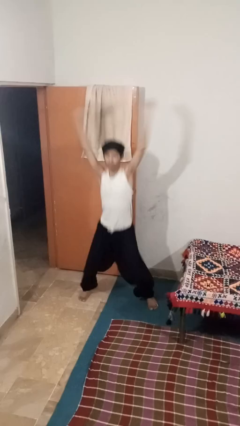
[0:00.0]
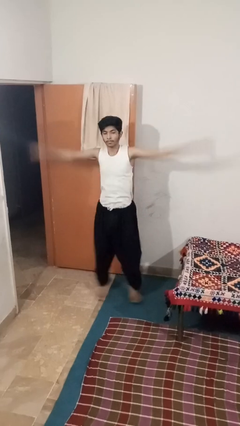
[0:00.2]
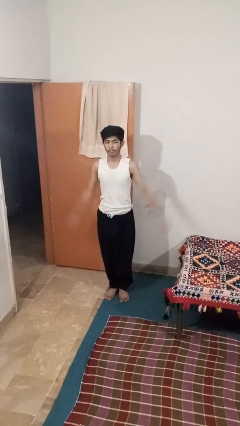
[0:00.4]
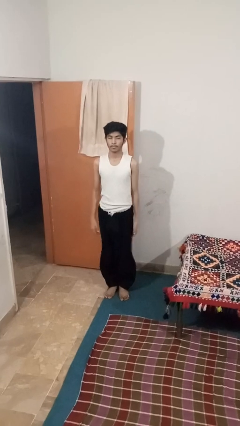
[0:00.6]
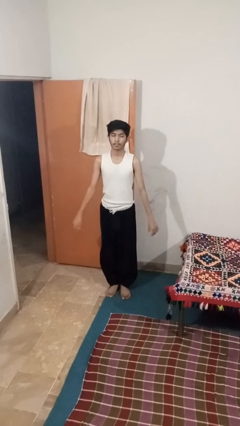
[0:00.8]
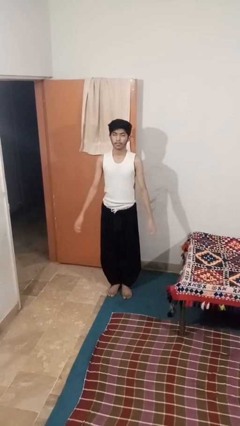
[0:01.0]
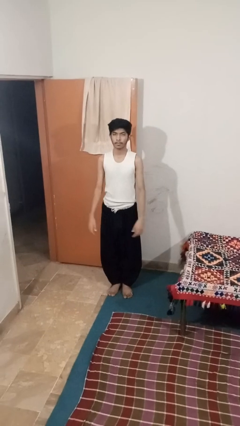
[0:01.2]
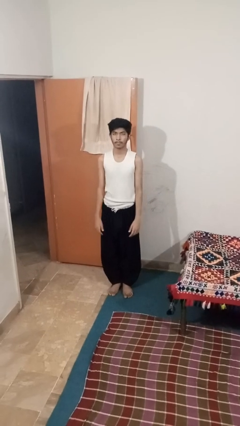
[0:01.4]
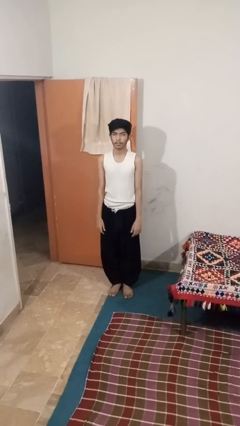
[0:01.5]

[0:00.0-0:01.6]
person exercises with jumping jacks

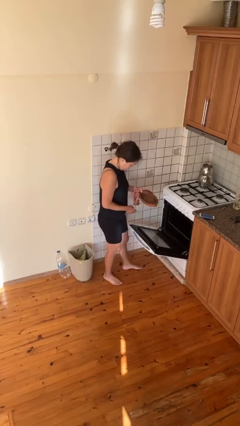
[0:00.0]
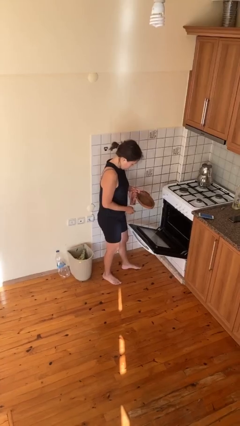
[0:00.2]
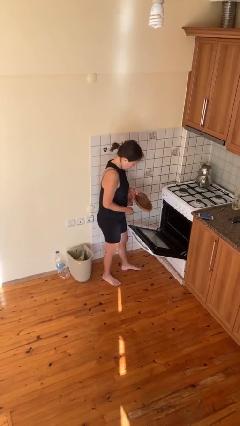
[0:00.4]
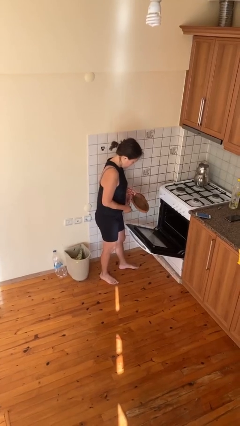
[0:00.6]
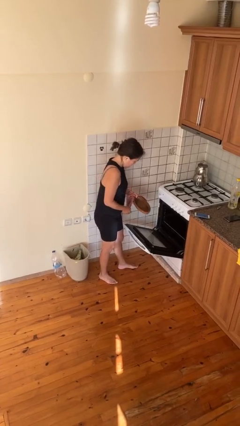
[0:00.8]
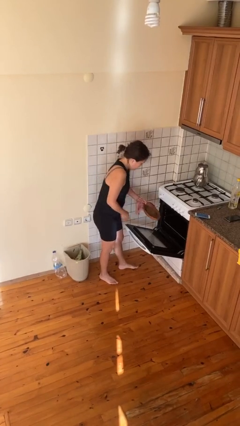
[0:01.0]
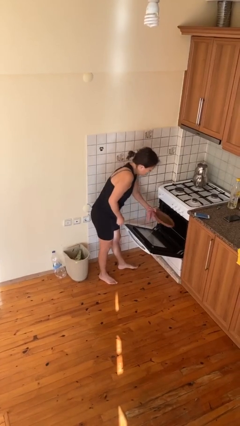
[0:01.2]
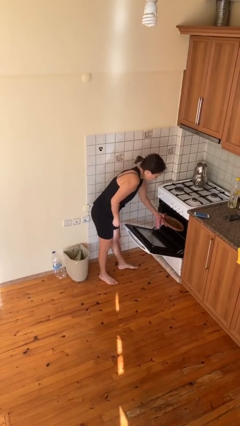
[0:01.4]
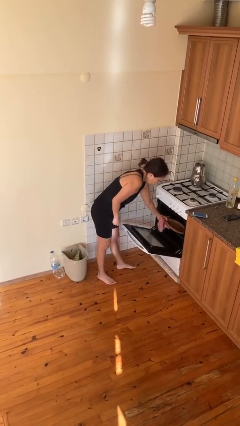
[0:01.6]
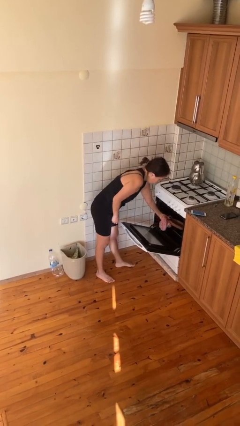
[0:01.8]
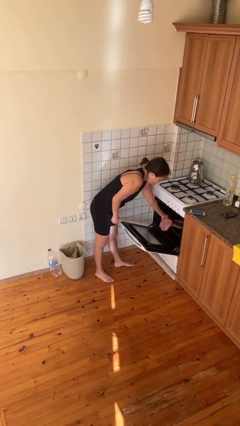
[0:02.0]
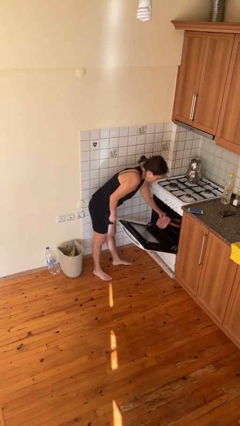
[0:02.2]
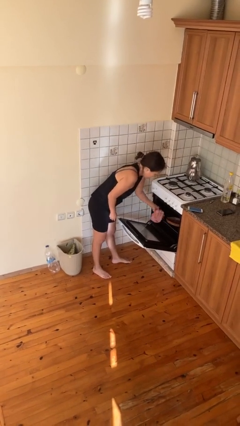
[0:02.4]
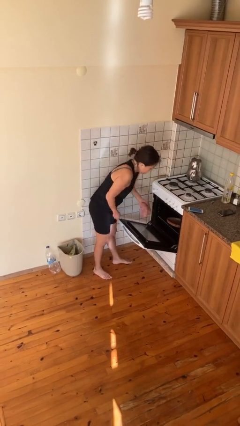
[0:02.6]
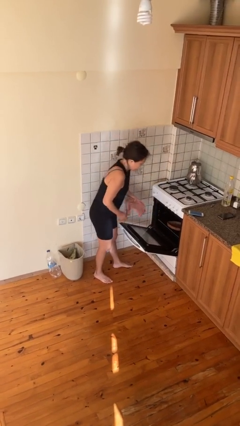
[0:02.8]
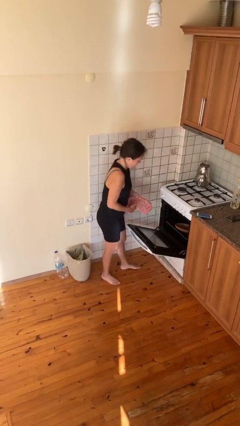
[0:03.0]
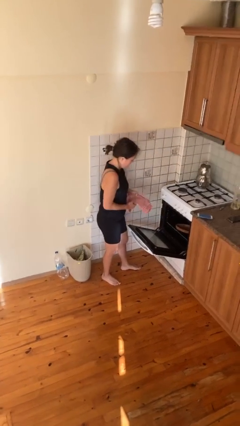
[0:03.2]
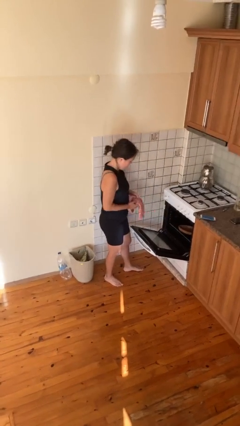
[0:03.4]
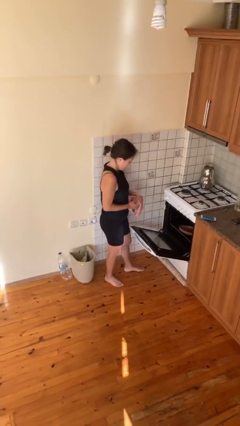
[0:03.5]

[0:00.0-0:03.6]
person puts object into oven

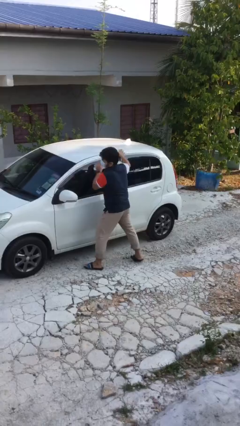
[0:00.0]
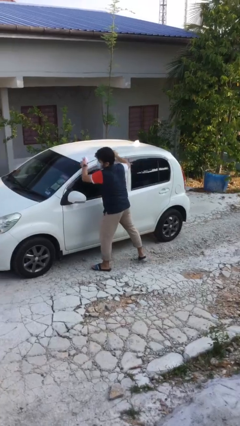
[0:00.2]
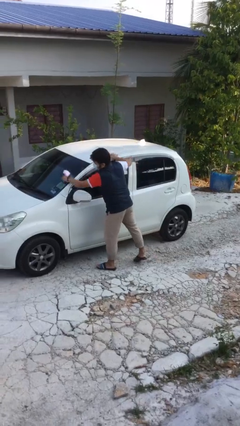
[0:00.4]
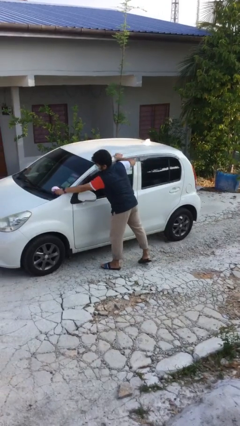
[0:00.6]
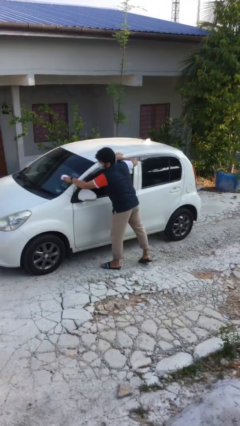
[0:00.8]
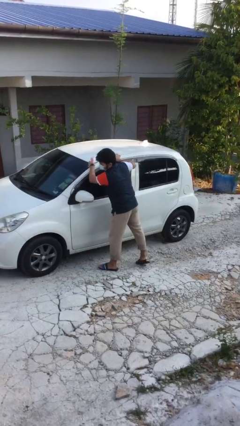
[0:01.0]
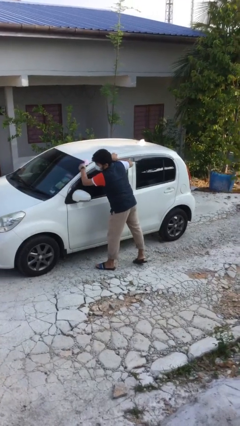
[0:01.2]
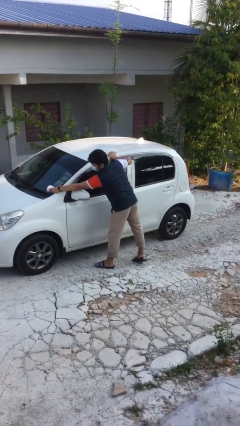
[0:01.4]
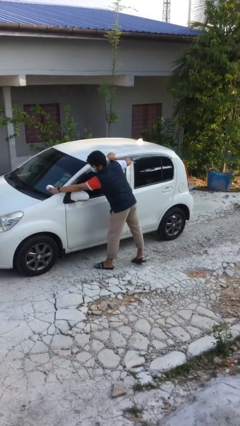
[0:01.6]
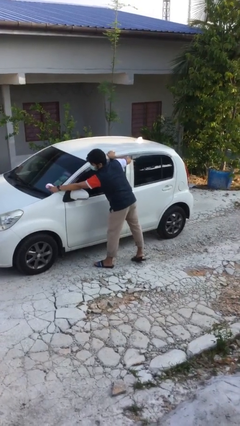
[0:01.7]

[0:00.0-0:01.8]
person polishes car with rag

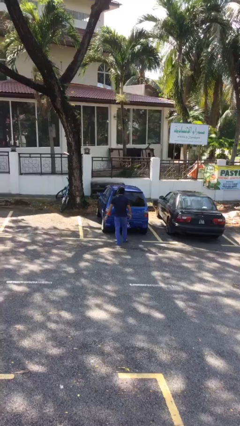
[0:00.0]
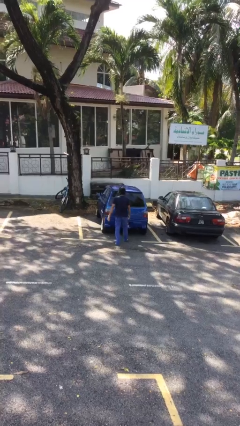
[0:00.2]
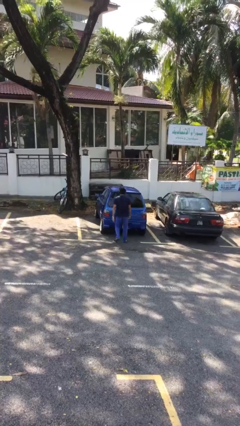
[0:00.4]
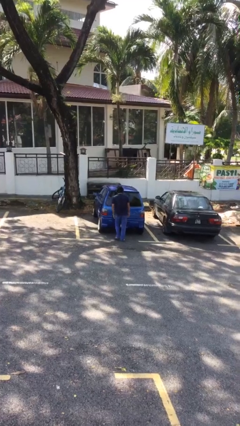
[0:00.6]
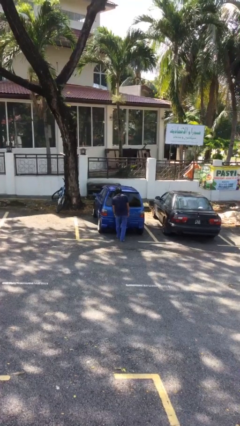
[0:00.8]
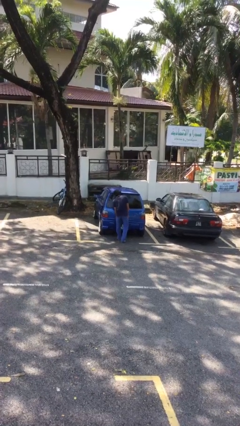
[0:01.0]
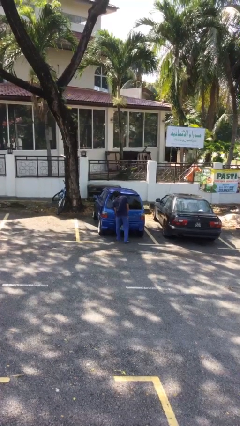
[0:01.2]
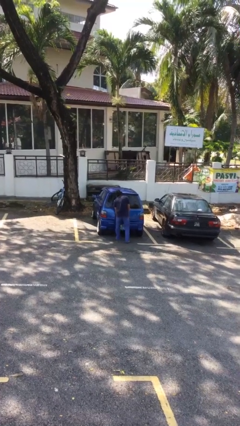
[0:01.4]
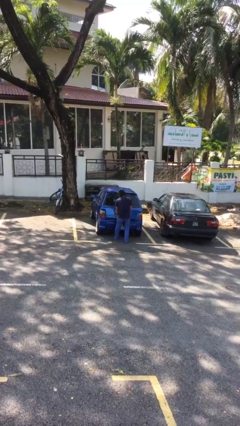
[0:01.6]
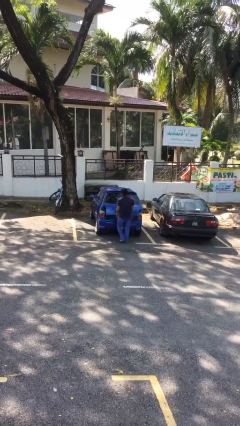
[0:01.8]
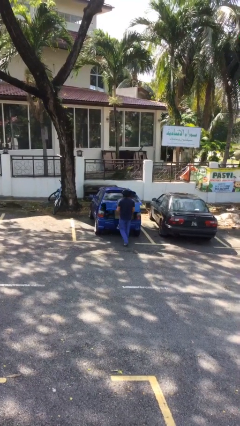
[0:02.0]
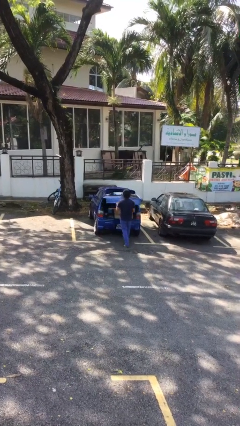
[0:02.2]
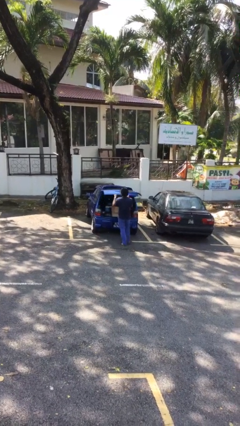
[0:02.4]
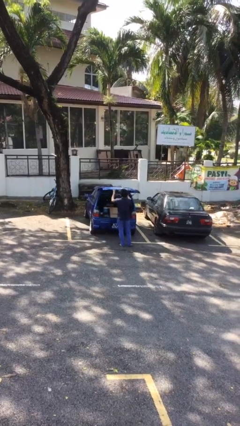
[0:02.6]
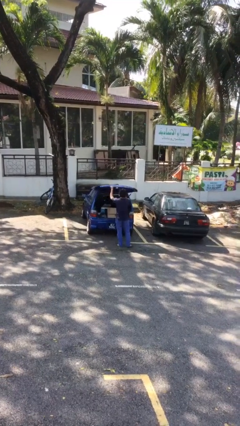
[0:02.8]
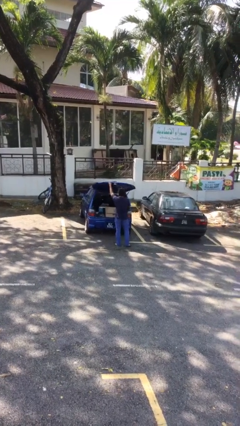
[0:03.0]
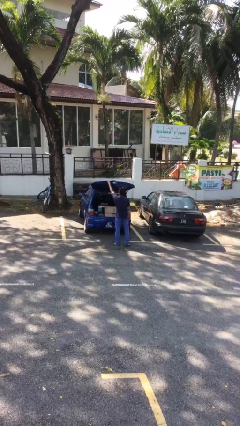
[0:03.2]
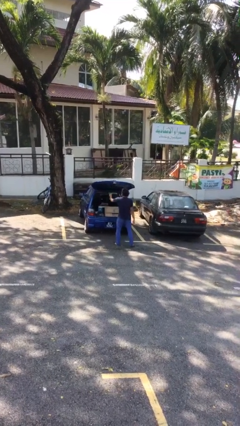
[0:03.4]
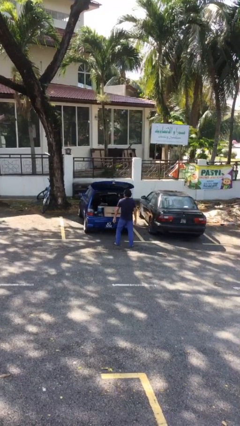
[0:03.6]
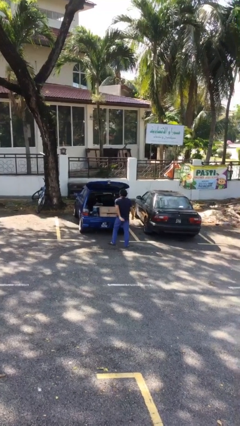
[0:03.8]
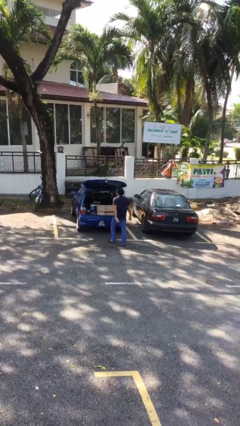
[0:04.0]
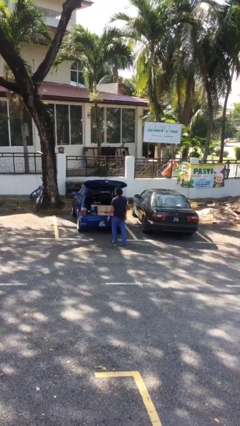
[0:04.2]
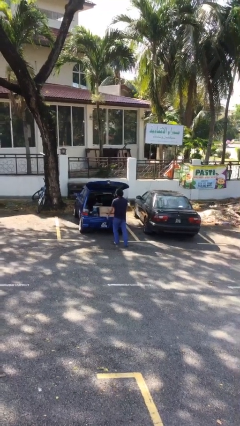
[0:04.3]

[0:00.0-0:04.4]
person opens car trunk

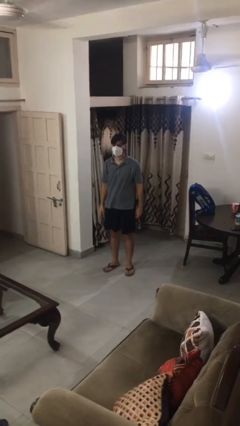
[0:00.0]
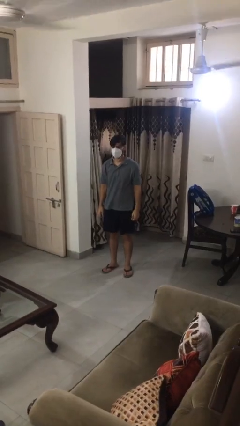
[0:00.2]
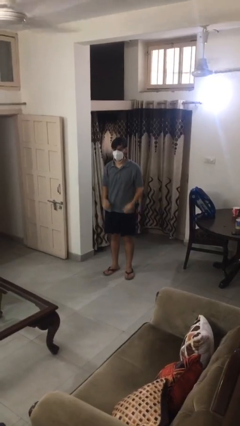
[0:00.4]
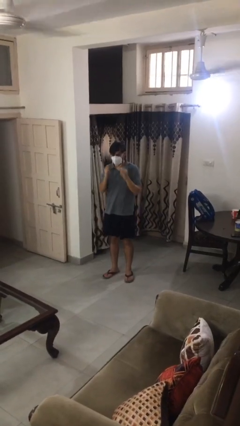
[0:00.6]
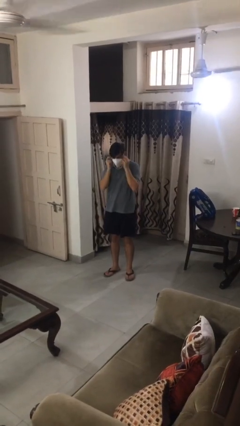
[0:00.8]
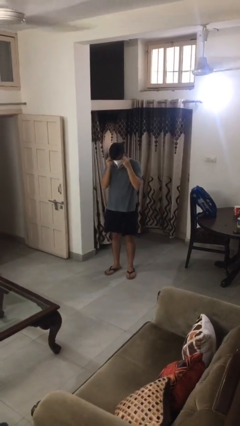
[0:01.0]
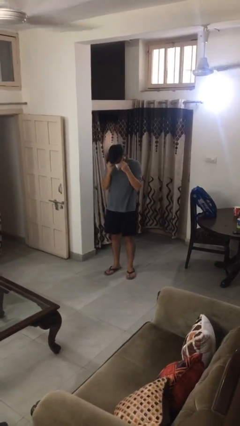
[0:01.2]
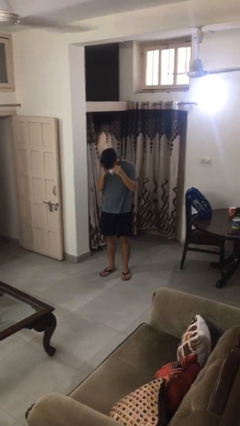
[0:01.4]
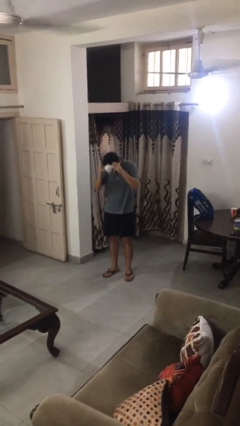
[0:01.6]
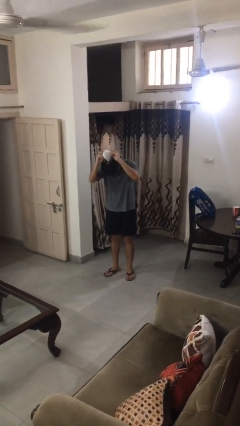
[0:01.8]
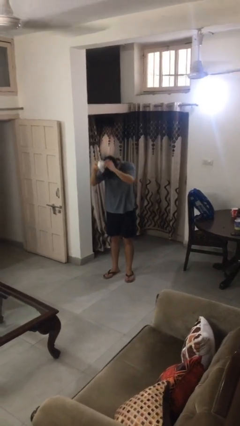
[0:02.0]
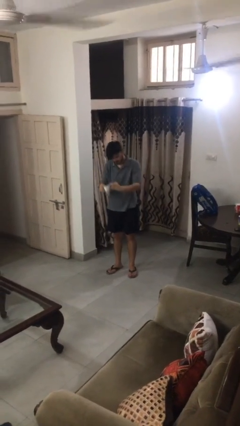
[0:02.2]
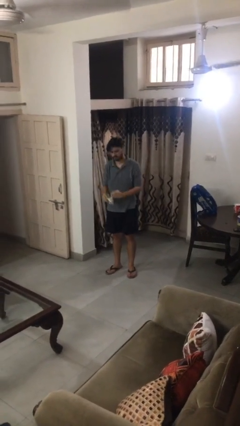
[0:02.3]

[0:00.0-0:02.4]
person takes off facemask

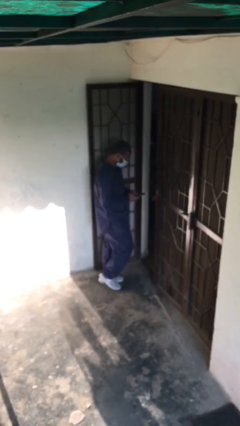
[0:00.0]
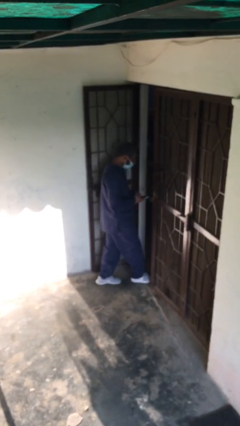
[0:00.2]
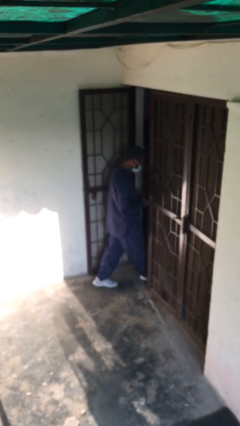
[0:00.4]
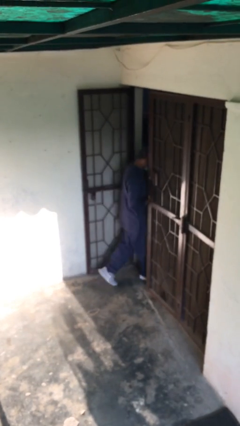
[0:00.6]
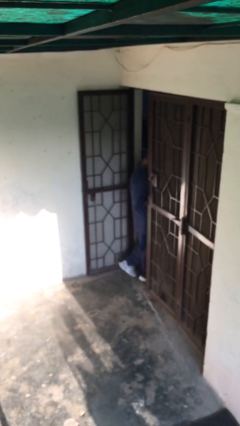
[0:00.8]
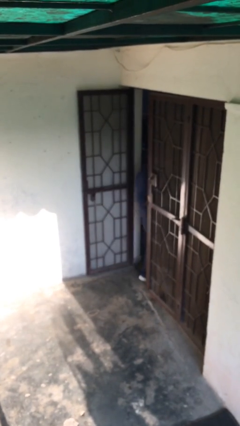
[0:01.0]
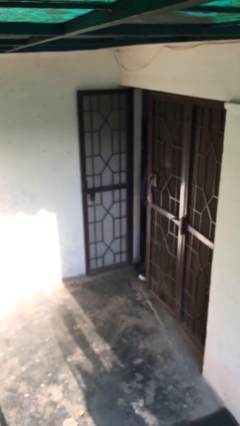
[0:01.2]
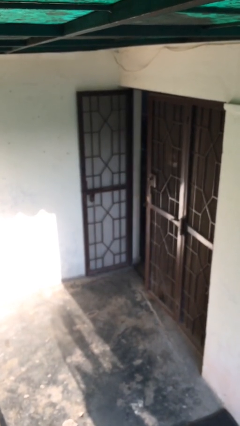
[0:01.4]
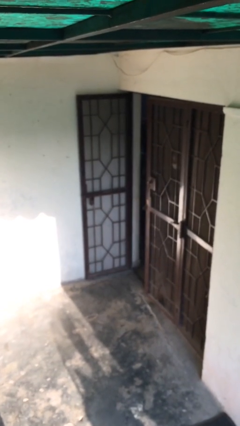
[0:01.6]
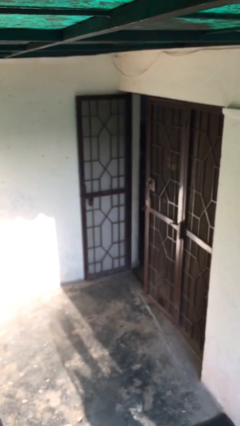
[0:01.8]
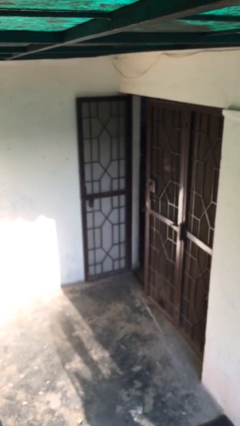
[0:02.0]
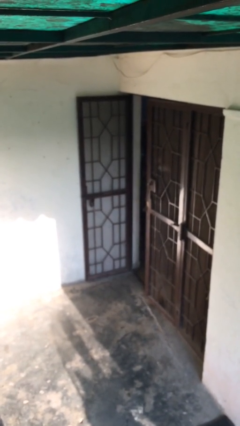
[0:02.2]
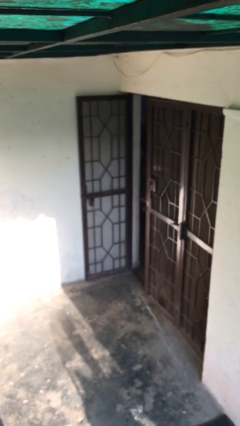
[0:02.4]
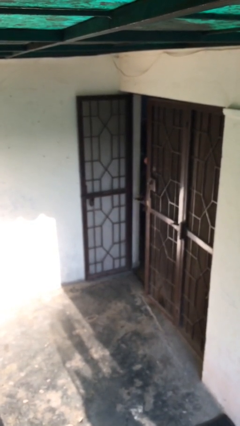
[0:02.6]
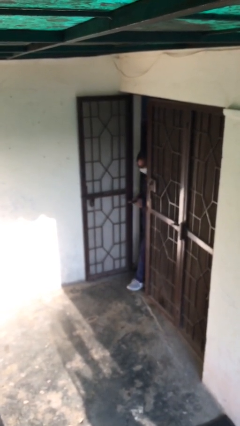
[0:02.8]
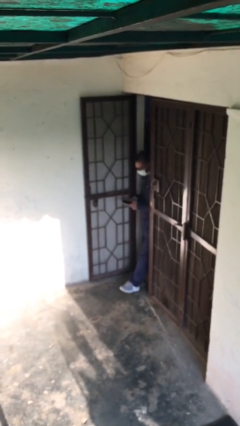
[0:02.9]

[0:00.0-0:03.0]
person exits scene through structure

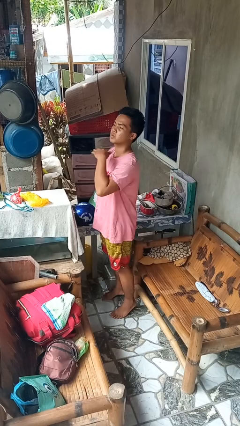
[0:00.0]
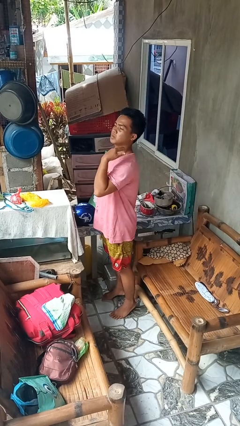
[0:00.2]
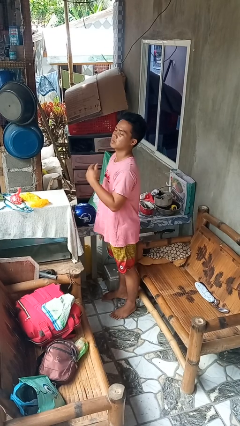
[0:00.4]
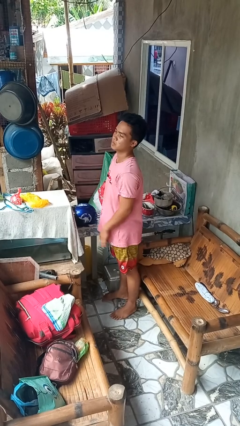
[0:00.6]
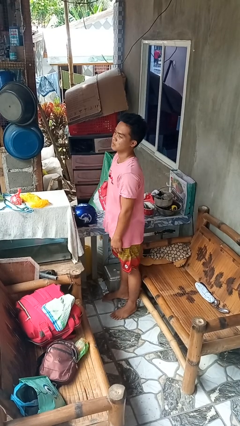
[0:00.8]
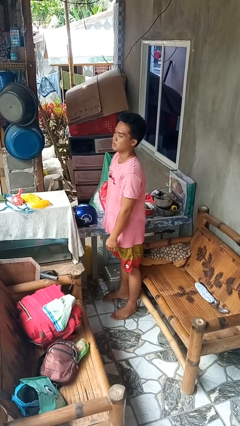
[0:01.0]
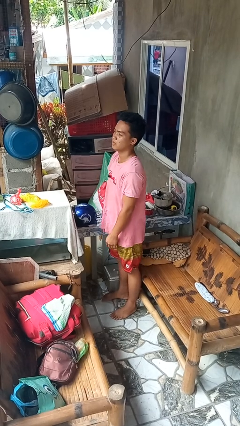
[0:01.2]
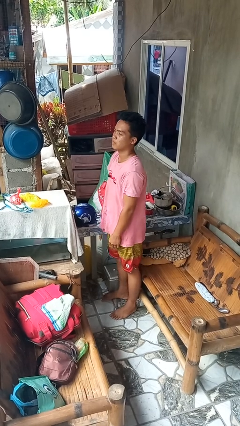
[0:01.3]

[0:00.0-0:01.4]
person gestures cut
